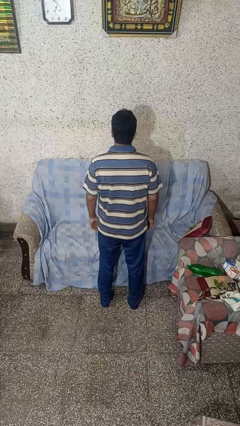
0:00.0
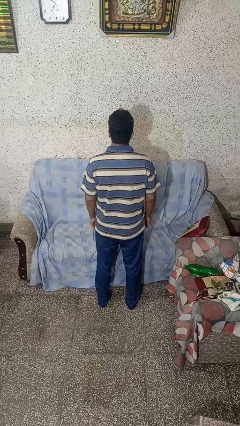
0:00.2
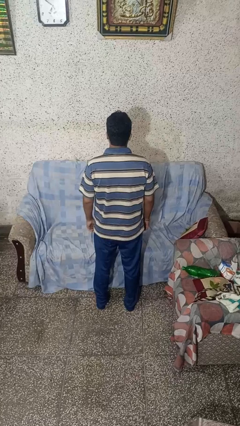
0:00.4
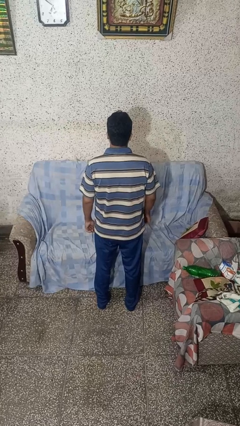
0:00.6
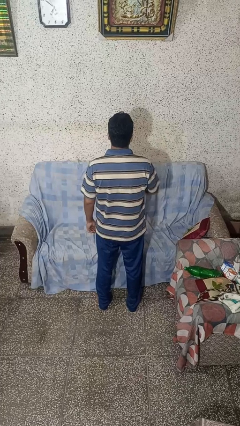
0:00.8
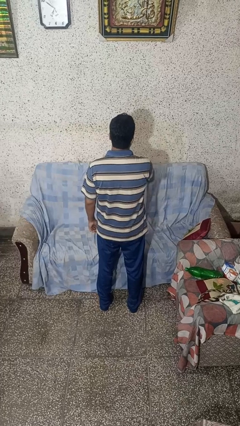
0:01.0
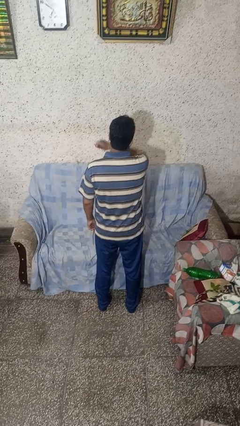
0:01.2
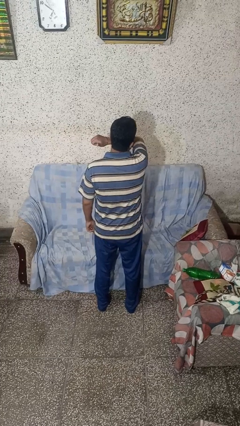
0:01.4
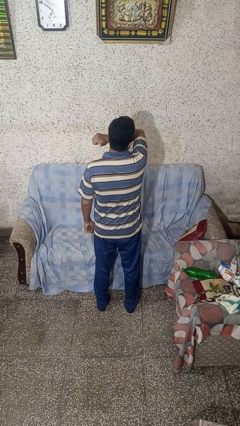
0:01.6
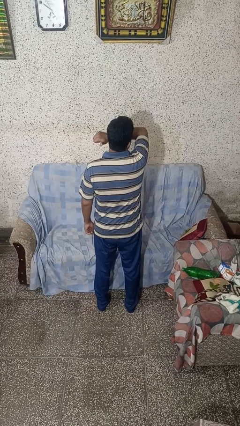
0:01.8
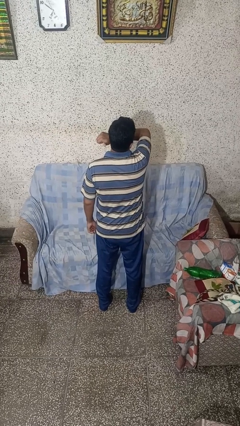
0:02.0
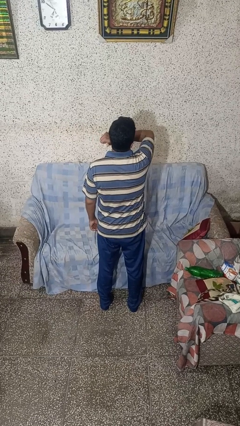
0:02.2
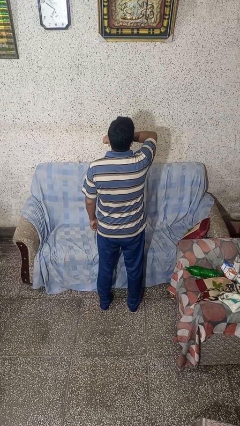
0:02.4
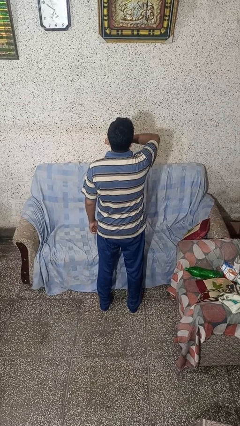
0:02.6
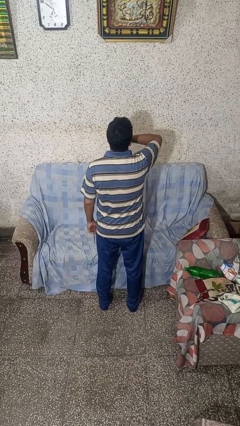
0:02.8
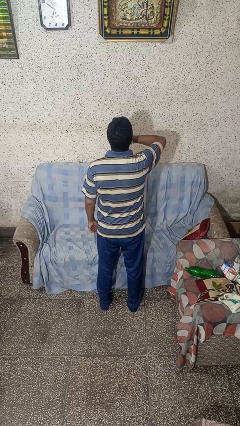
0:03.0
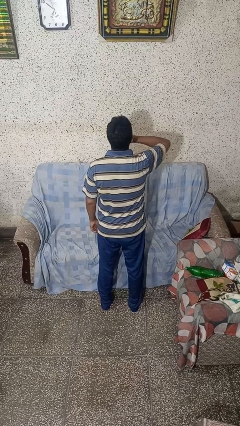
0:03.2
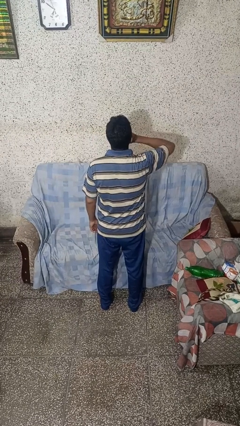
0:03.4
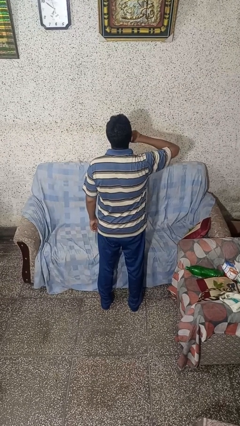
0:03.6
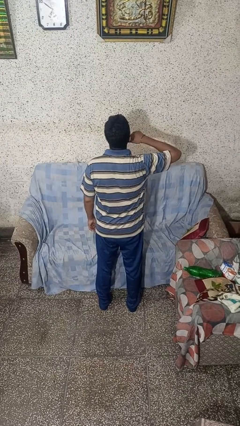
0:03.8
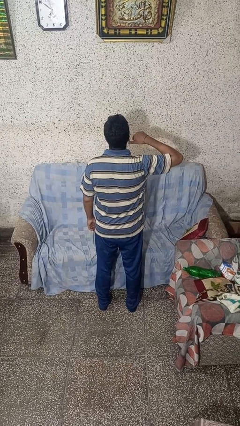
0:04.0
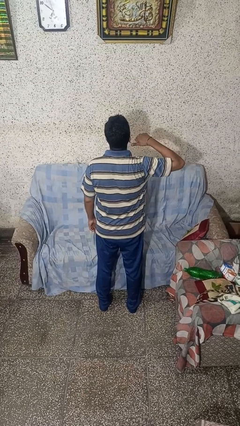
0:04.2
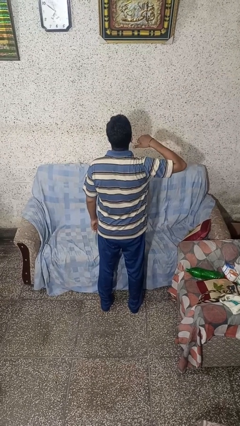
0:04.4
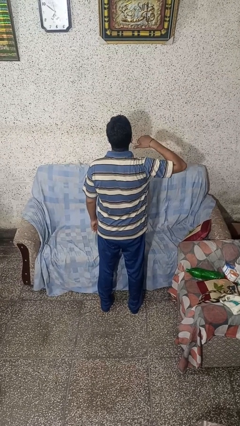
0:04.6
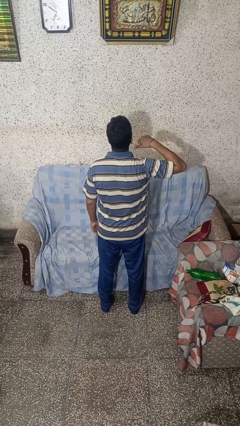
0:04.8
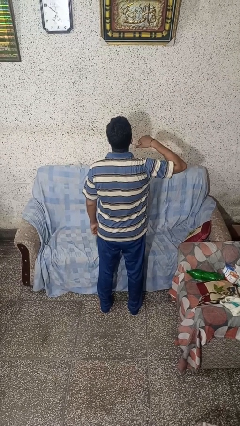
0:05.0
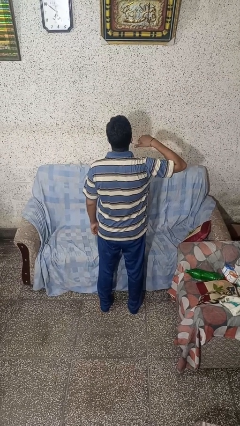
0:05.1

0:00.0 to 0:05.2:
person gestures cut

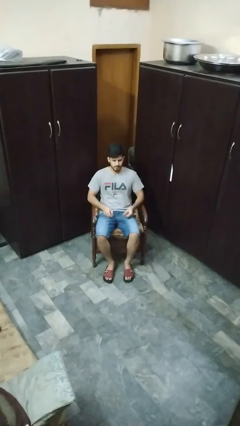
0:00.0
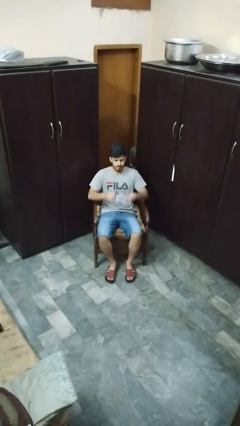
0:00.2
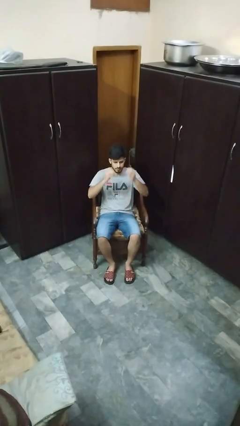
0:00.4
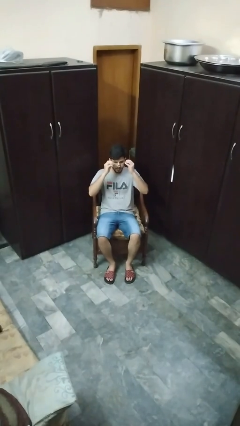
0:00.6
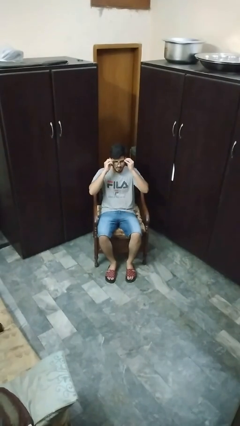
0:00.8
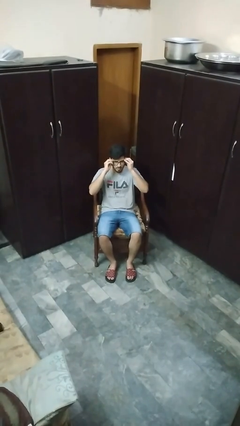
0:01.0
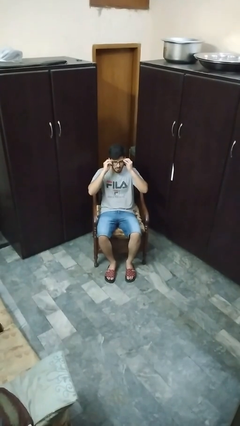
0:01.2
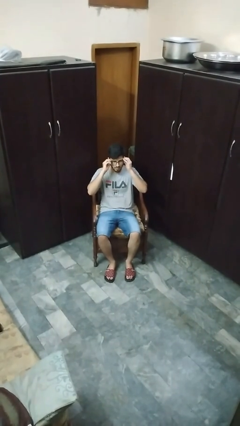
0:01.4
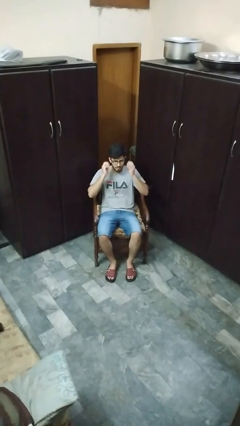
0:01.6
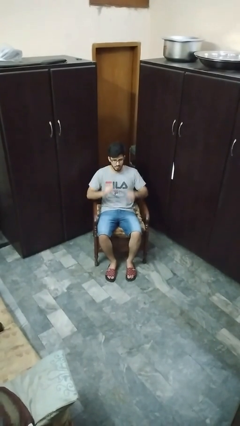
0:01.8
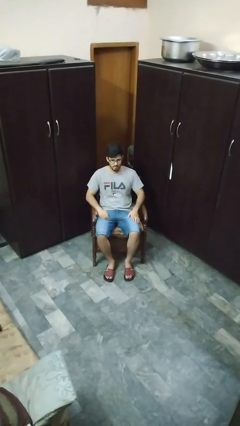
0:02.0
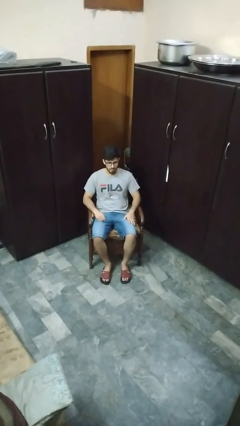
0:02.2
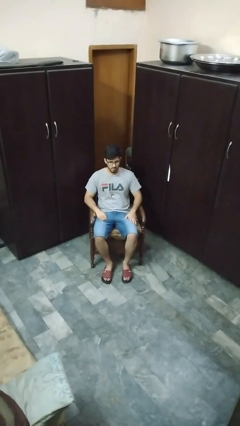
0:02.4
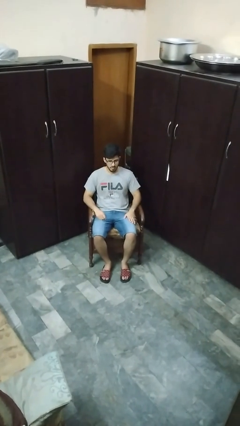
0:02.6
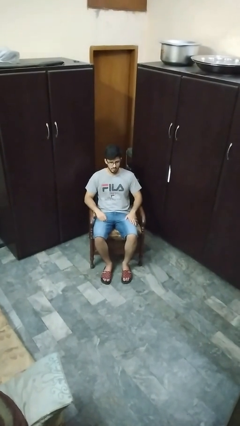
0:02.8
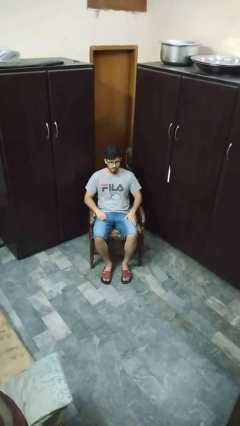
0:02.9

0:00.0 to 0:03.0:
person puts on glasses

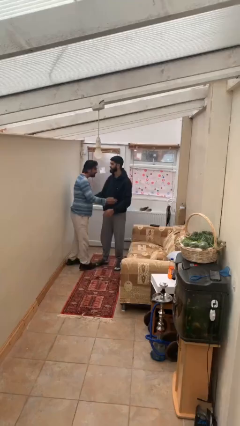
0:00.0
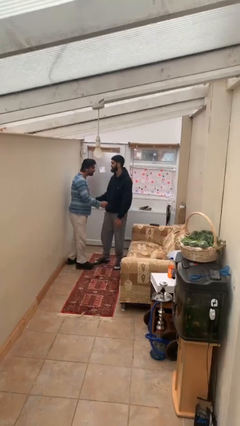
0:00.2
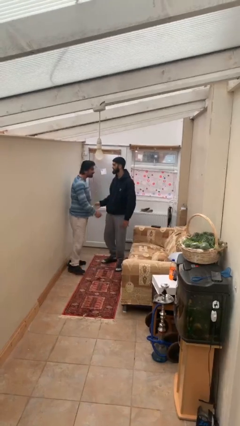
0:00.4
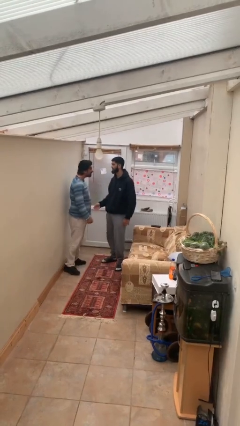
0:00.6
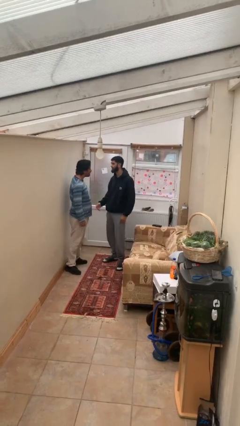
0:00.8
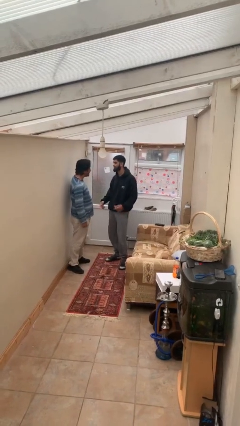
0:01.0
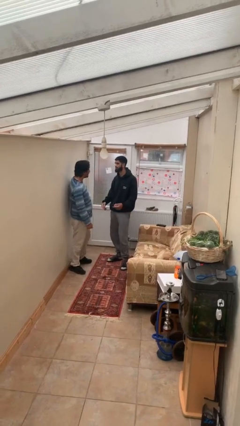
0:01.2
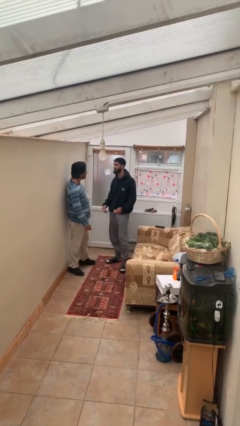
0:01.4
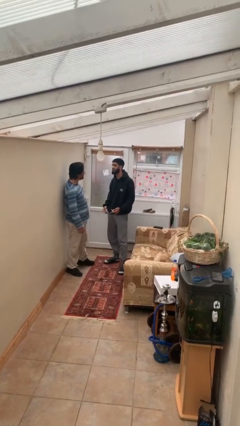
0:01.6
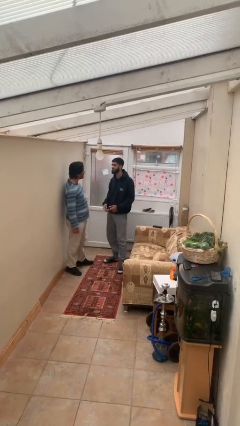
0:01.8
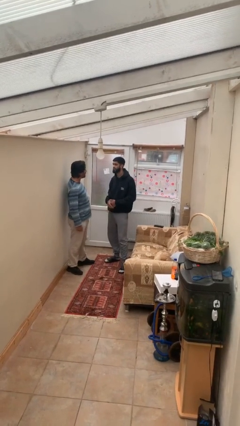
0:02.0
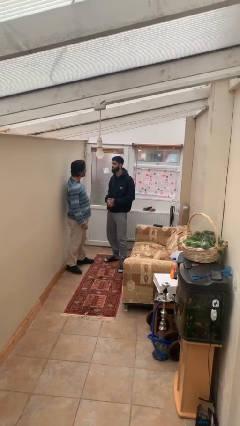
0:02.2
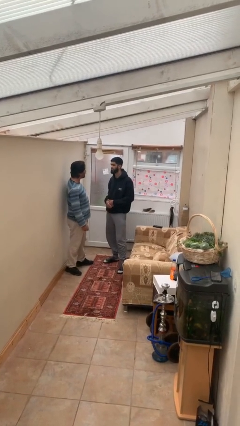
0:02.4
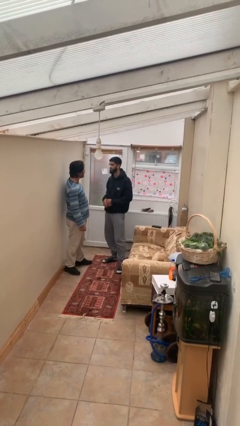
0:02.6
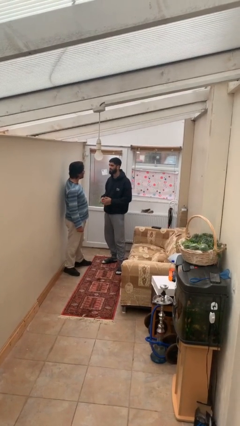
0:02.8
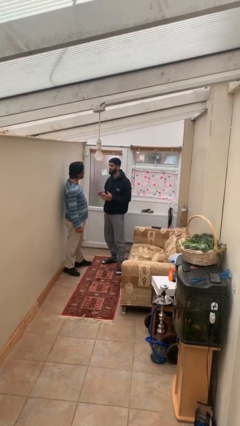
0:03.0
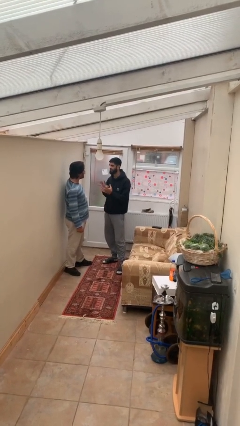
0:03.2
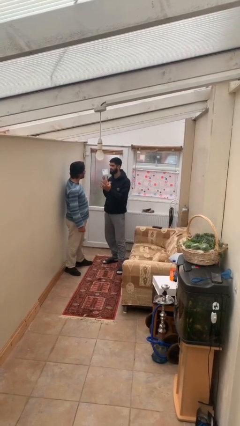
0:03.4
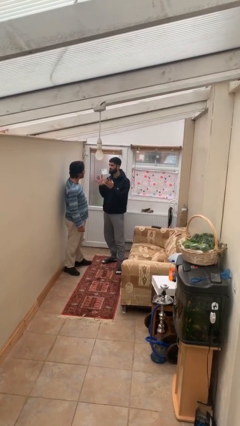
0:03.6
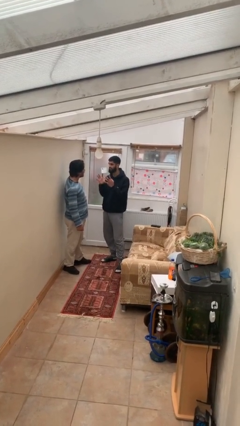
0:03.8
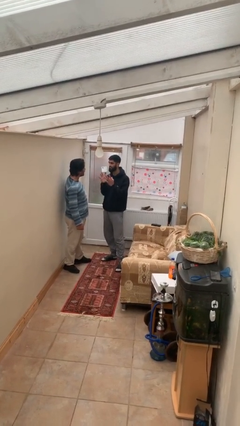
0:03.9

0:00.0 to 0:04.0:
person talks to person

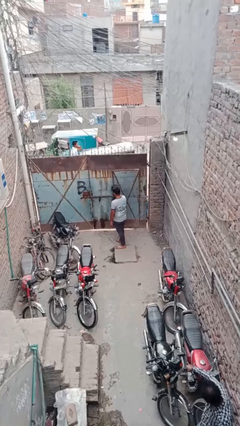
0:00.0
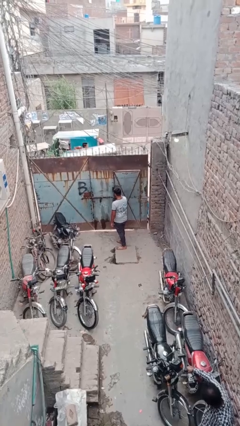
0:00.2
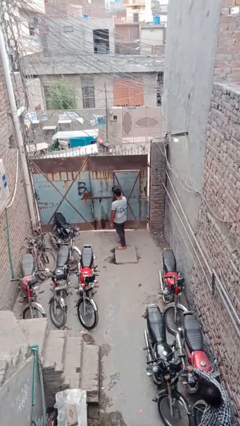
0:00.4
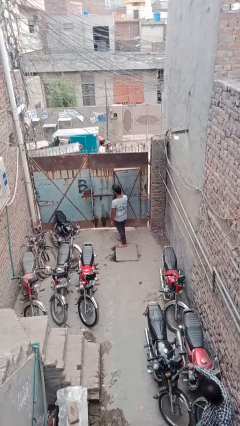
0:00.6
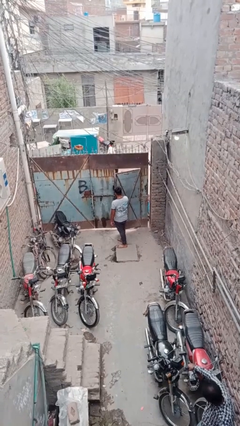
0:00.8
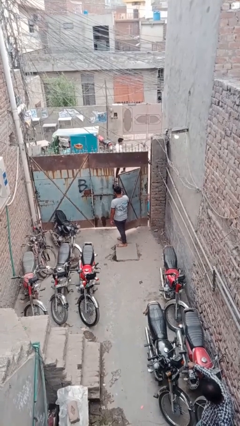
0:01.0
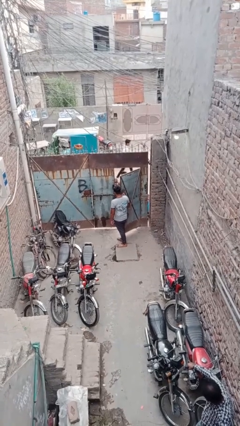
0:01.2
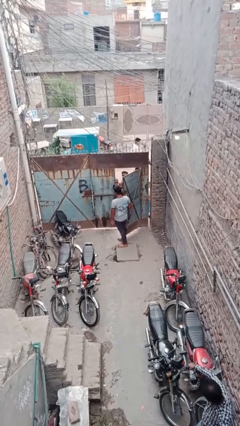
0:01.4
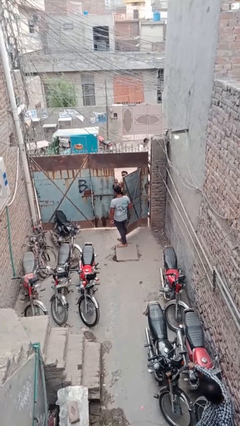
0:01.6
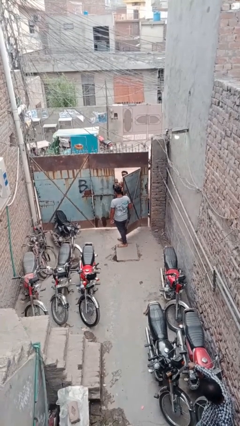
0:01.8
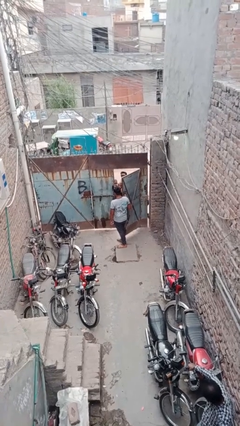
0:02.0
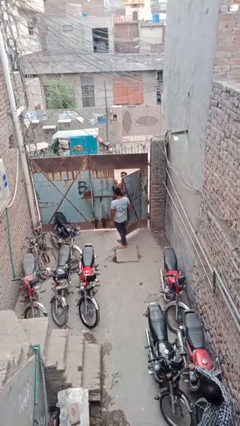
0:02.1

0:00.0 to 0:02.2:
person opens facility door

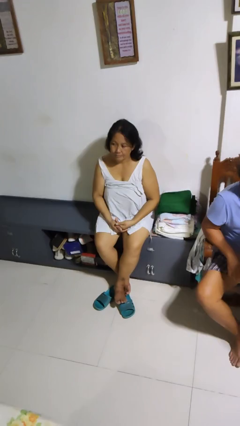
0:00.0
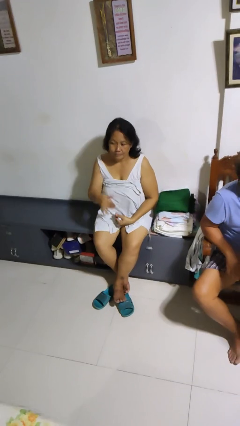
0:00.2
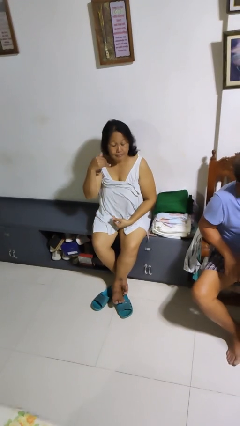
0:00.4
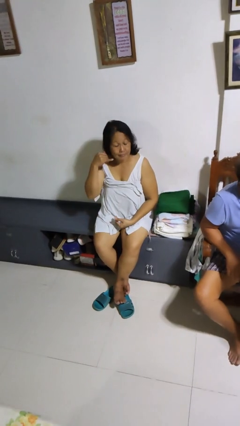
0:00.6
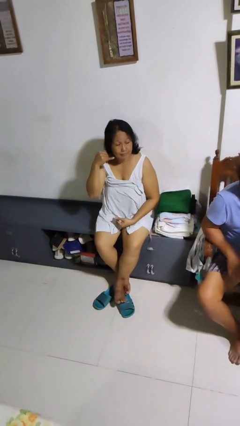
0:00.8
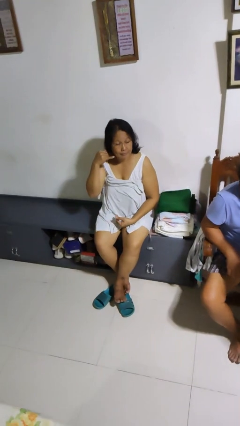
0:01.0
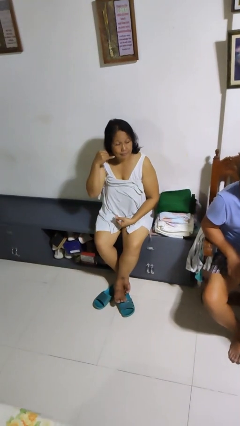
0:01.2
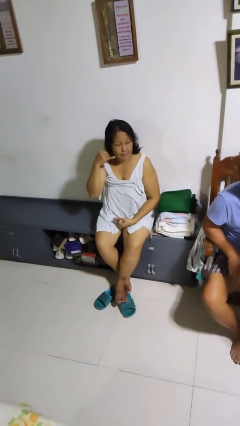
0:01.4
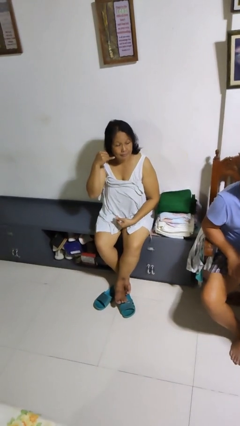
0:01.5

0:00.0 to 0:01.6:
person gestures call me

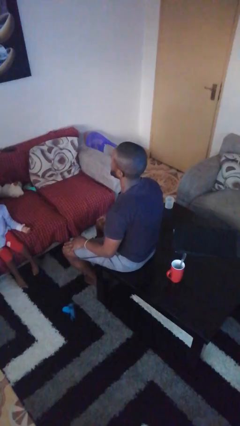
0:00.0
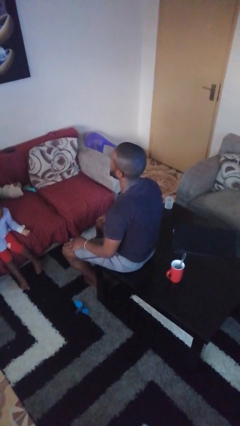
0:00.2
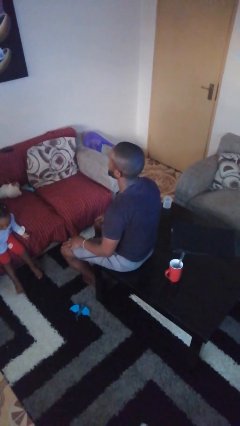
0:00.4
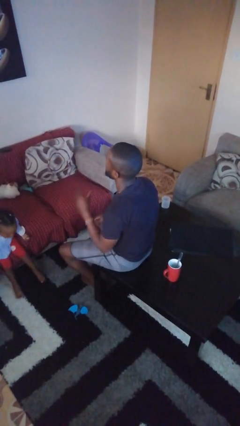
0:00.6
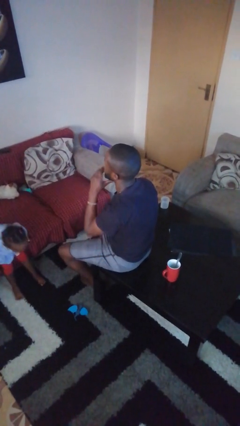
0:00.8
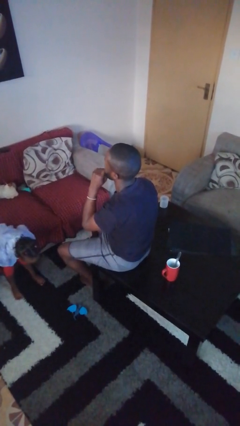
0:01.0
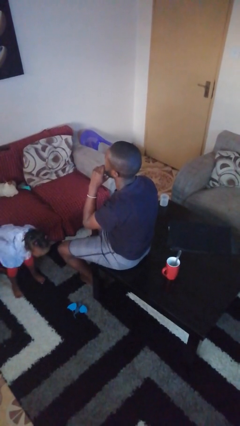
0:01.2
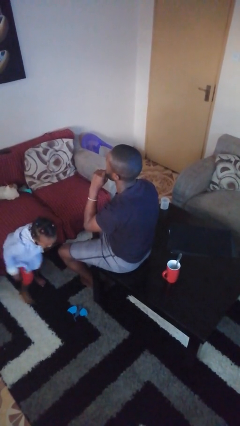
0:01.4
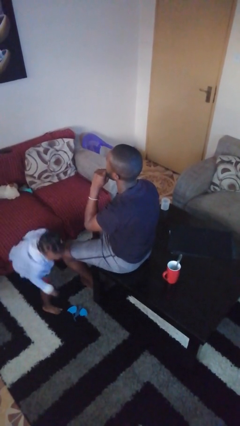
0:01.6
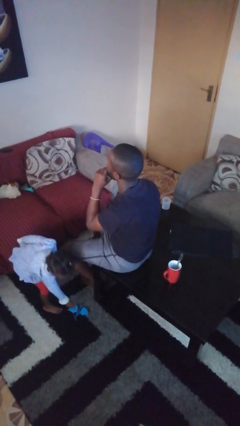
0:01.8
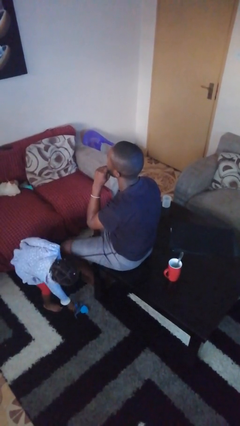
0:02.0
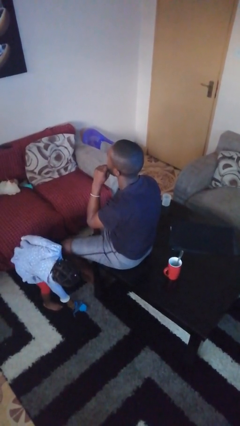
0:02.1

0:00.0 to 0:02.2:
person strokes chin
